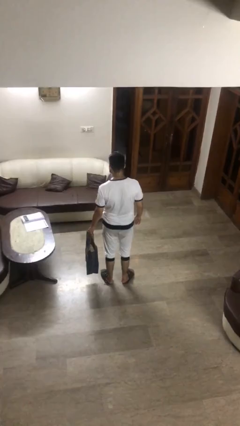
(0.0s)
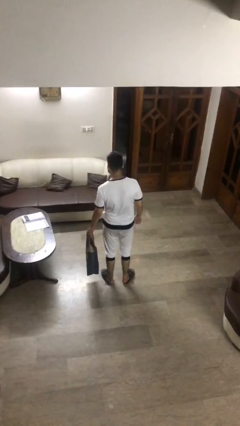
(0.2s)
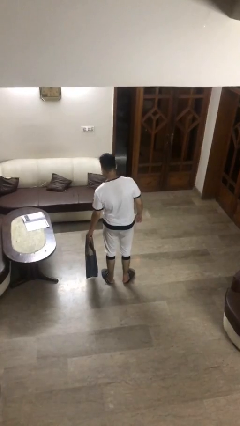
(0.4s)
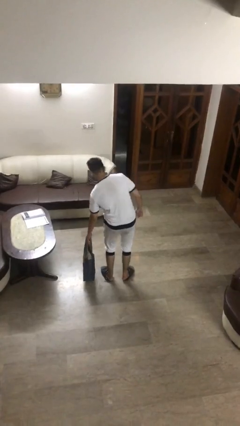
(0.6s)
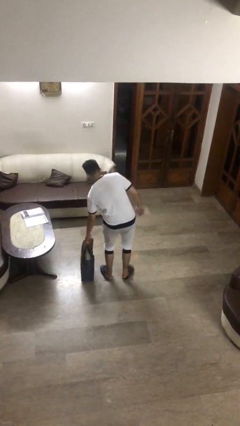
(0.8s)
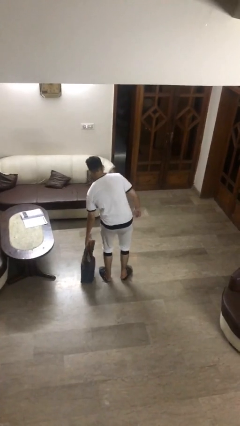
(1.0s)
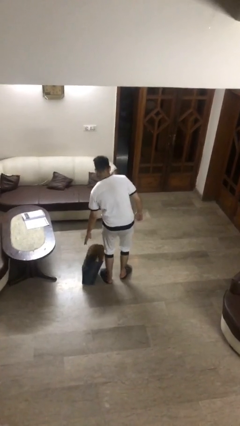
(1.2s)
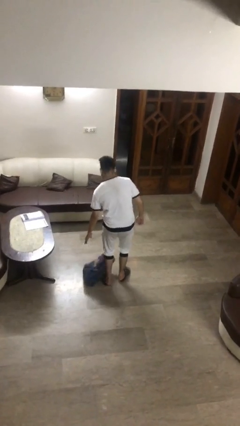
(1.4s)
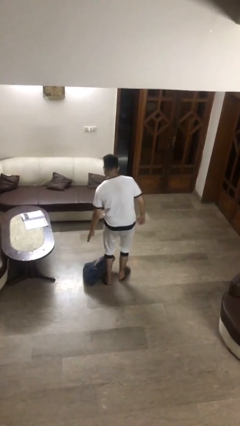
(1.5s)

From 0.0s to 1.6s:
person puts down object on floor

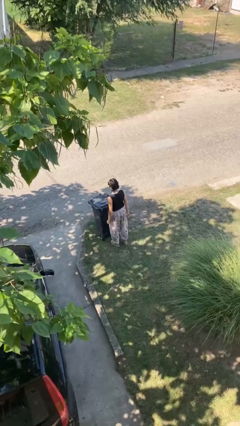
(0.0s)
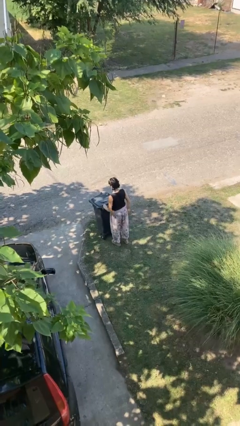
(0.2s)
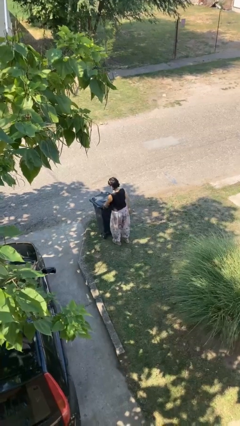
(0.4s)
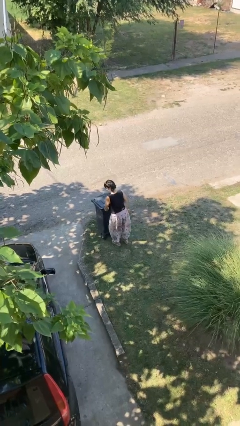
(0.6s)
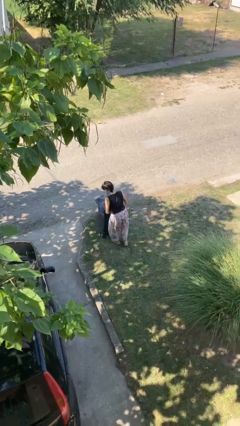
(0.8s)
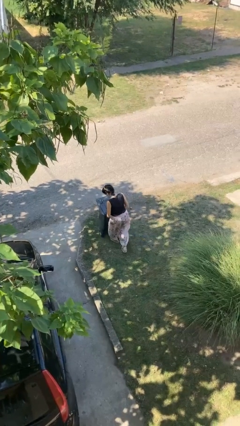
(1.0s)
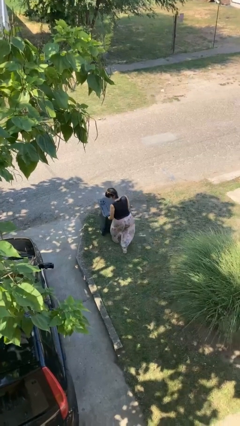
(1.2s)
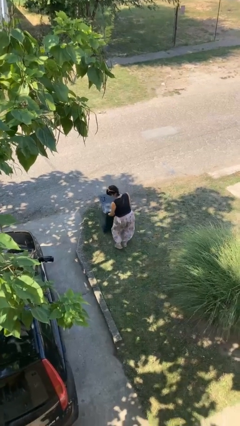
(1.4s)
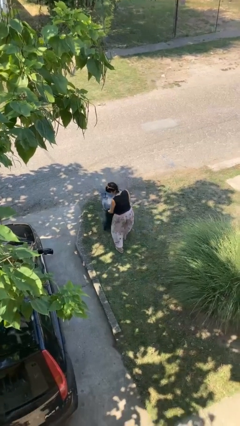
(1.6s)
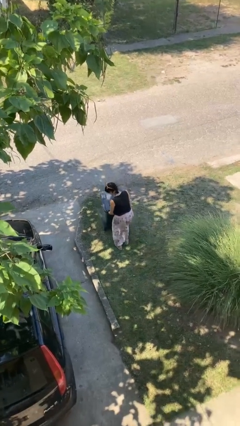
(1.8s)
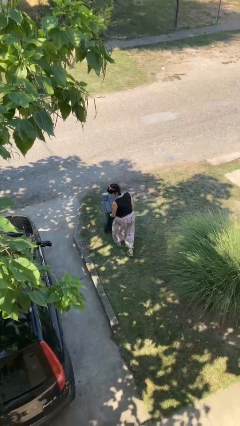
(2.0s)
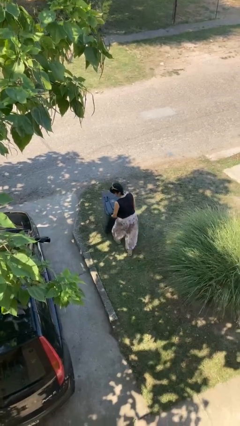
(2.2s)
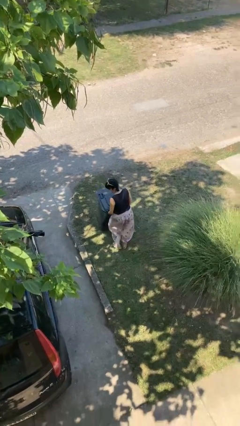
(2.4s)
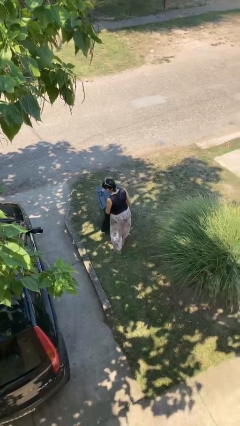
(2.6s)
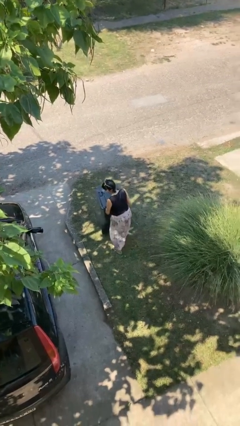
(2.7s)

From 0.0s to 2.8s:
person pulls wheeled trashcan

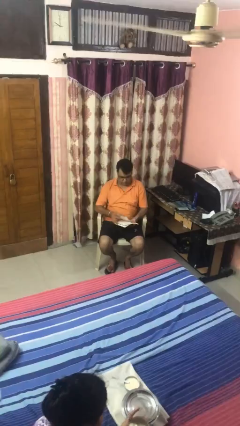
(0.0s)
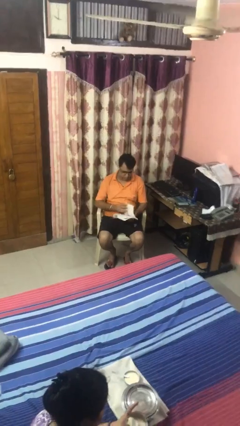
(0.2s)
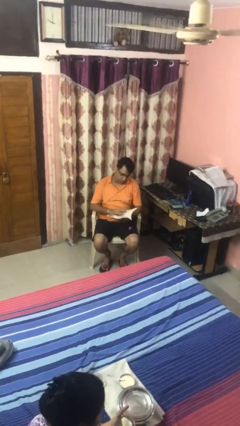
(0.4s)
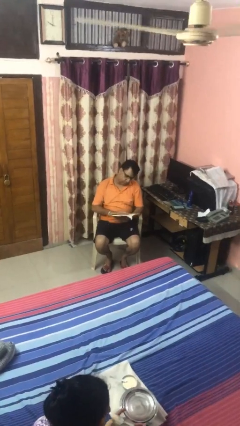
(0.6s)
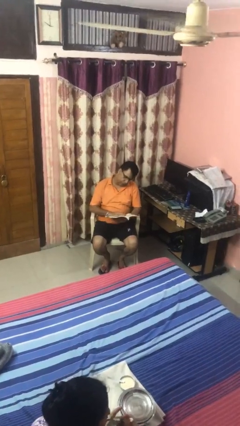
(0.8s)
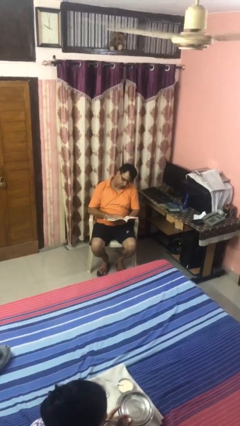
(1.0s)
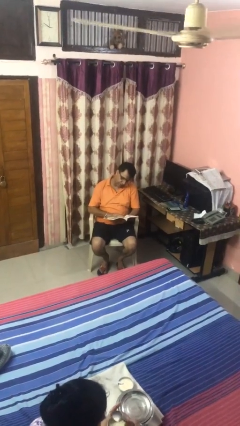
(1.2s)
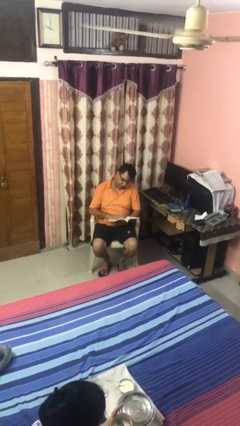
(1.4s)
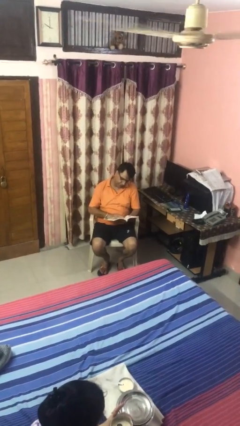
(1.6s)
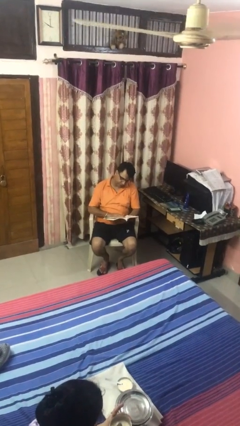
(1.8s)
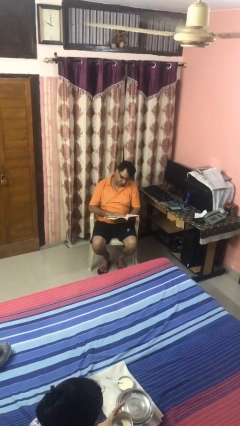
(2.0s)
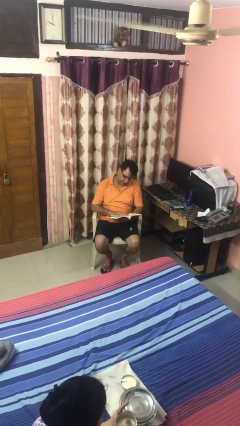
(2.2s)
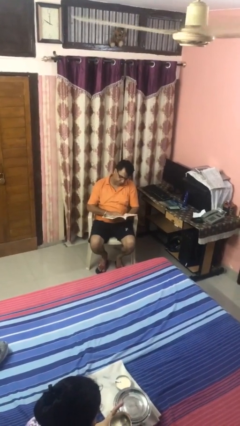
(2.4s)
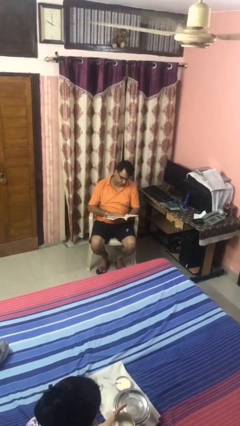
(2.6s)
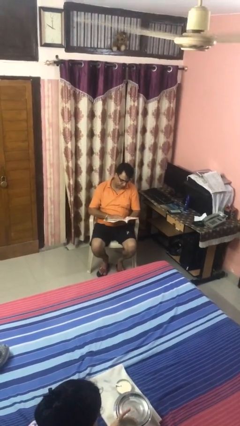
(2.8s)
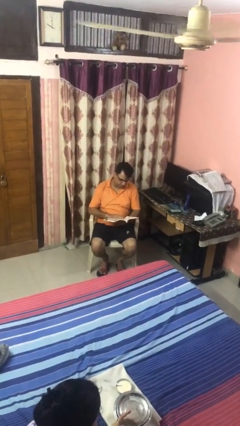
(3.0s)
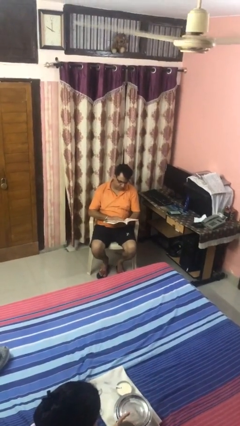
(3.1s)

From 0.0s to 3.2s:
person reads book

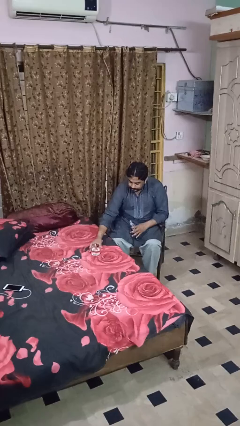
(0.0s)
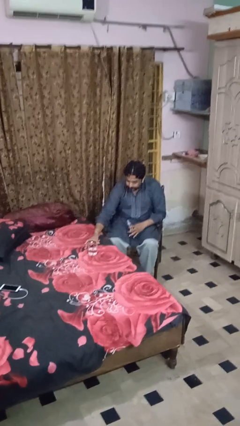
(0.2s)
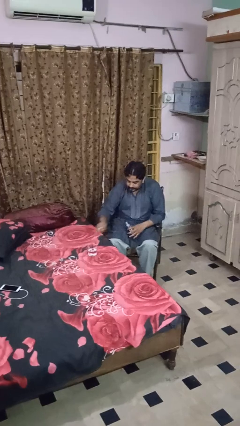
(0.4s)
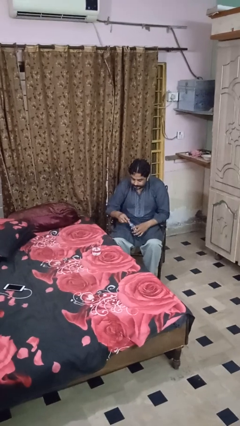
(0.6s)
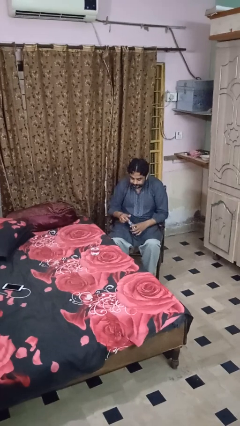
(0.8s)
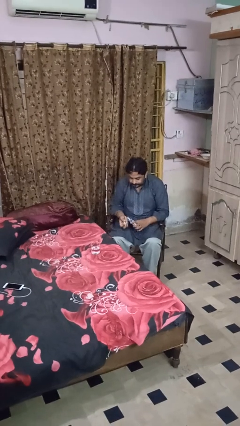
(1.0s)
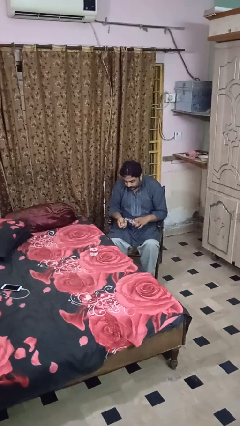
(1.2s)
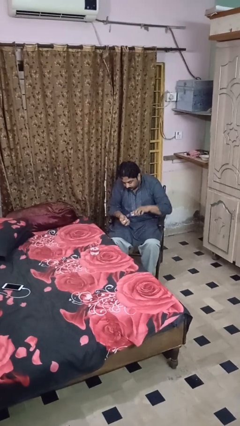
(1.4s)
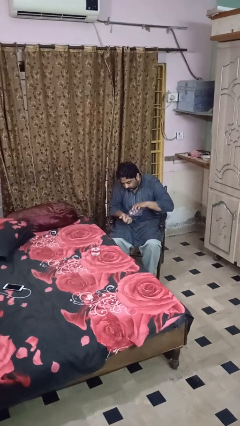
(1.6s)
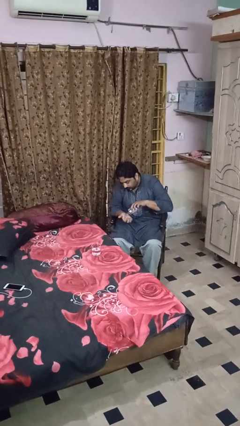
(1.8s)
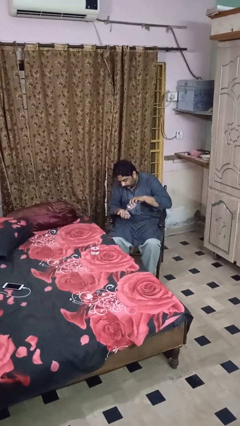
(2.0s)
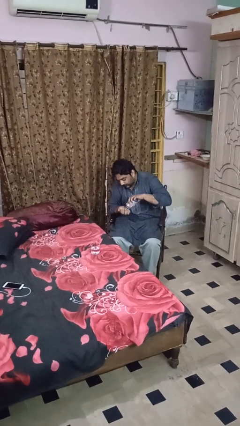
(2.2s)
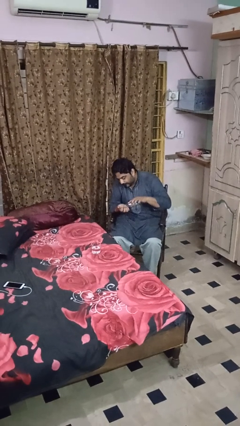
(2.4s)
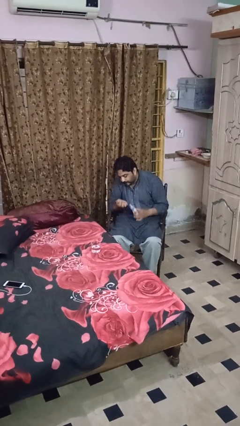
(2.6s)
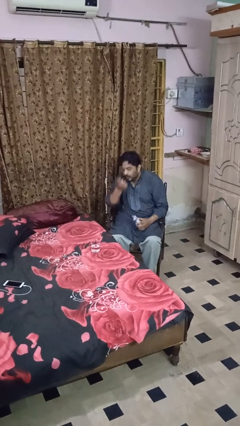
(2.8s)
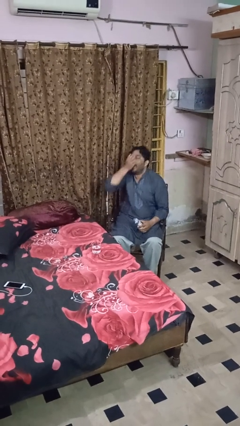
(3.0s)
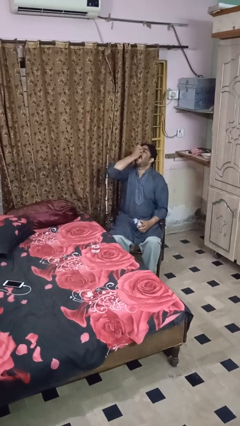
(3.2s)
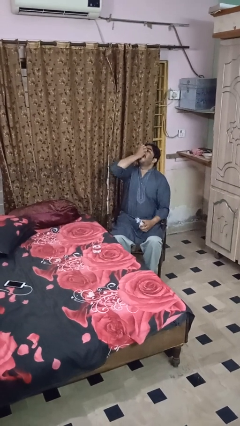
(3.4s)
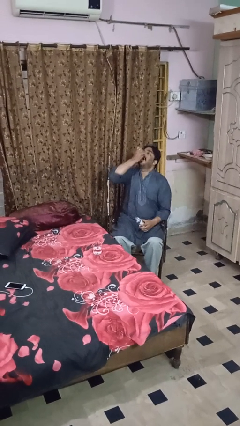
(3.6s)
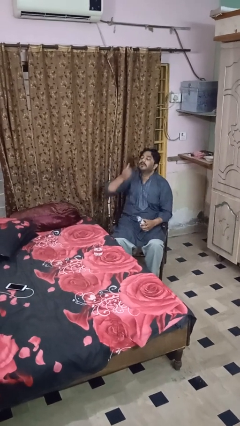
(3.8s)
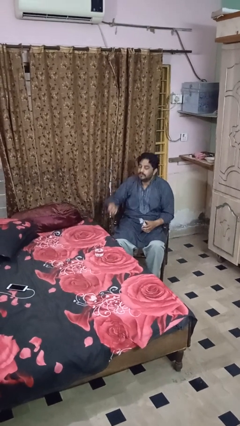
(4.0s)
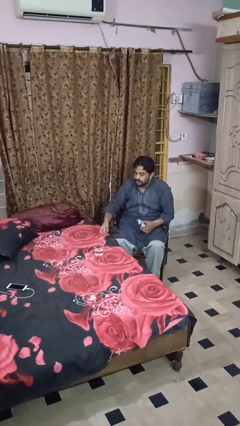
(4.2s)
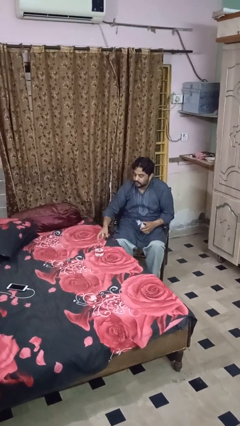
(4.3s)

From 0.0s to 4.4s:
person takes medicine pills

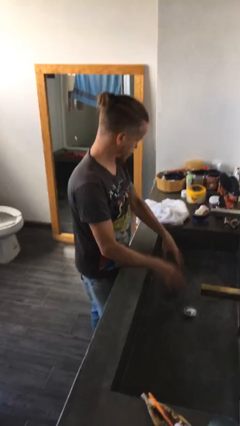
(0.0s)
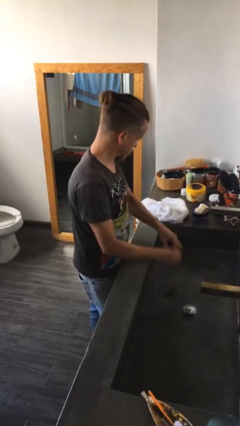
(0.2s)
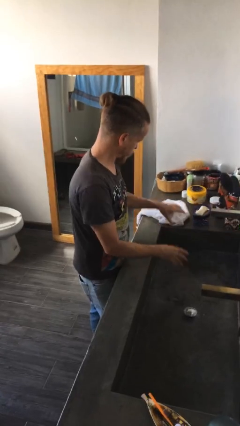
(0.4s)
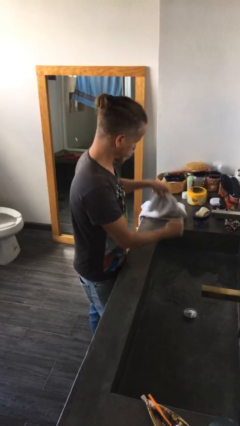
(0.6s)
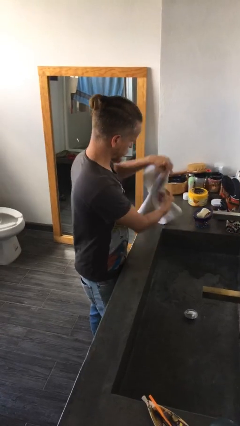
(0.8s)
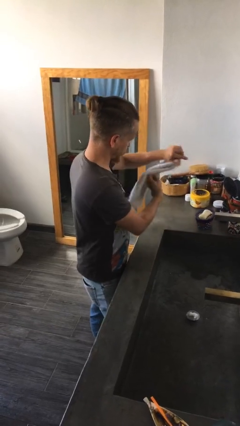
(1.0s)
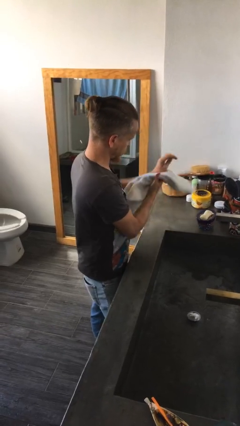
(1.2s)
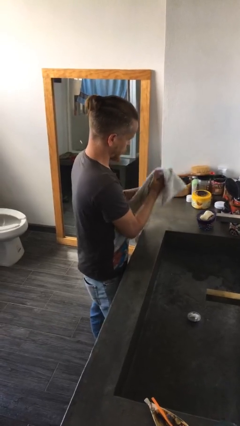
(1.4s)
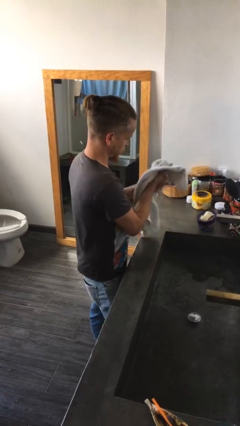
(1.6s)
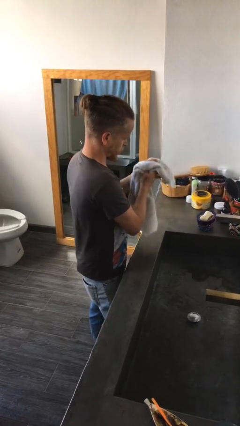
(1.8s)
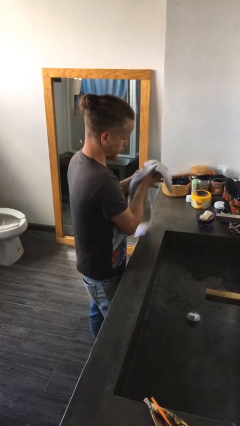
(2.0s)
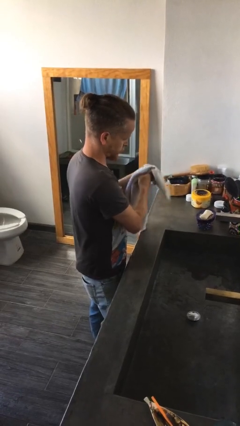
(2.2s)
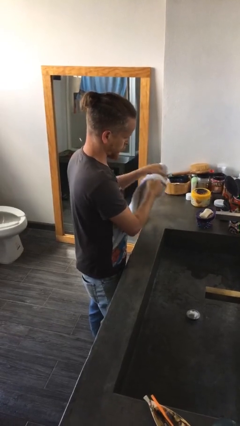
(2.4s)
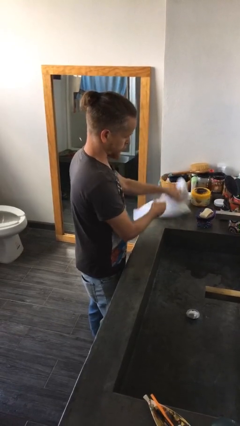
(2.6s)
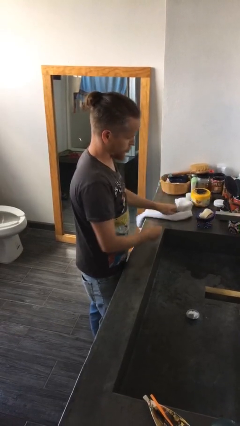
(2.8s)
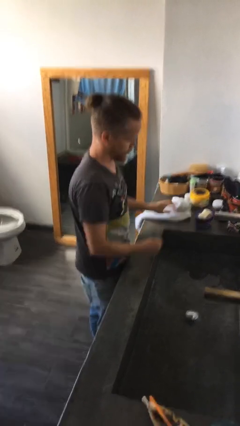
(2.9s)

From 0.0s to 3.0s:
person dries hands with towel

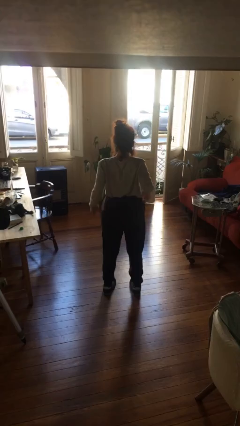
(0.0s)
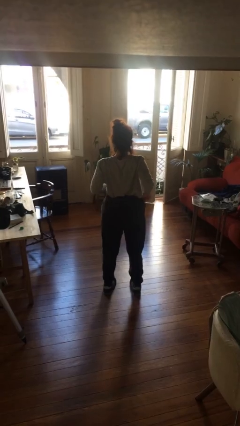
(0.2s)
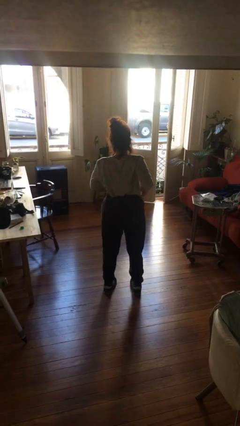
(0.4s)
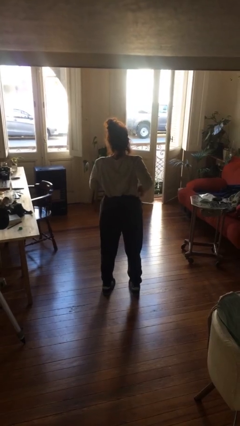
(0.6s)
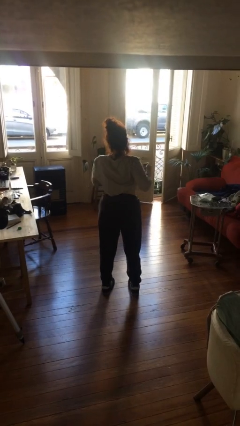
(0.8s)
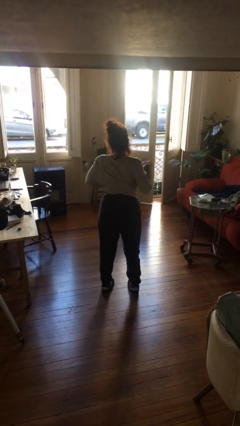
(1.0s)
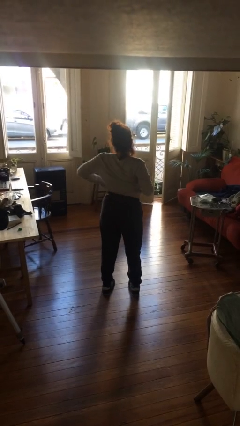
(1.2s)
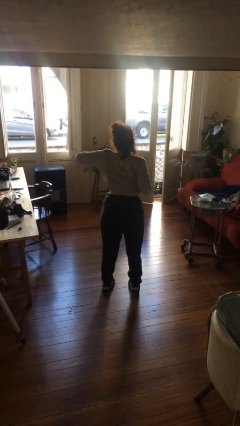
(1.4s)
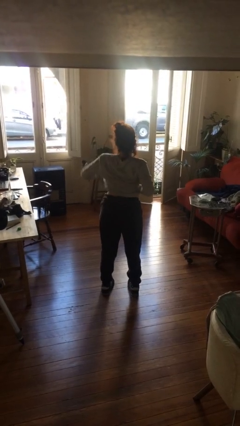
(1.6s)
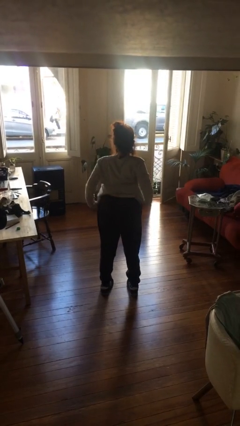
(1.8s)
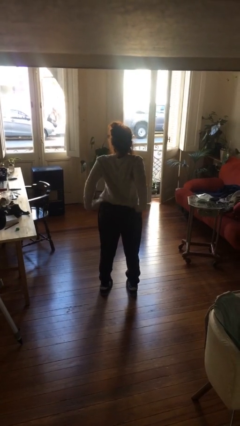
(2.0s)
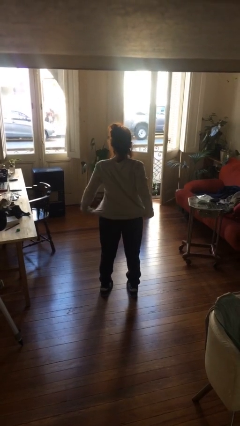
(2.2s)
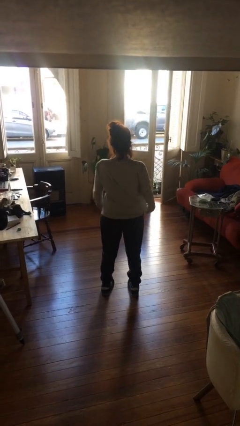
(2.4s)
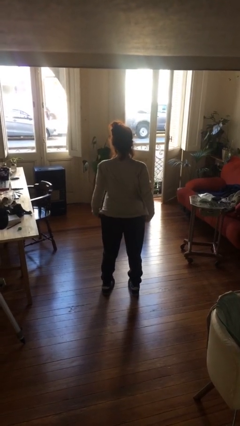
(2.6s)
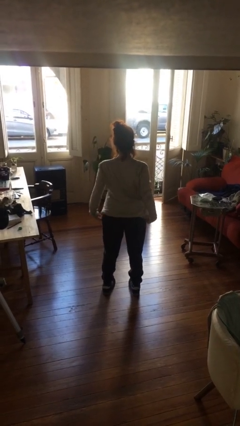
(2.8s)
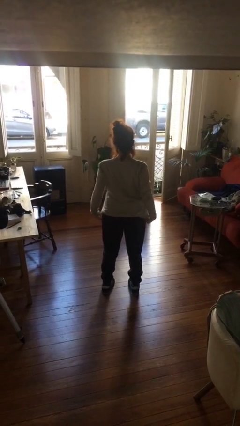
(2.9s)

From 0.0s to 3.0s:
person untucks shirt
